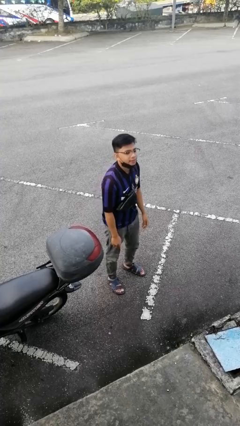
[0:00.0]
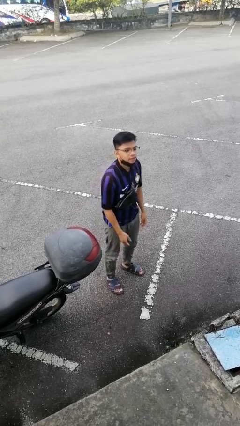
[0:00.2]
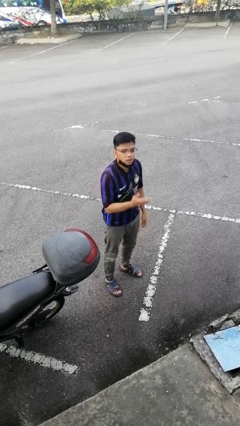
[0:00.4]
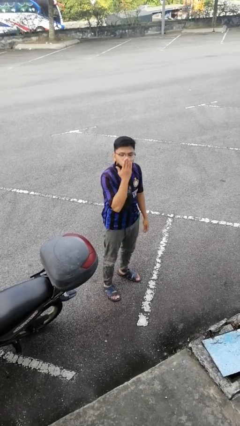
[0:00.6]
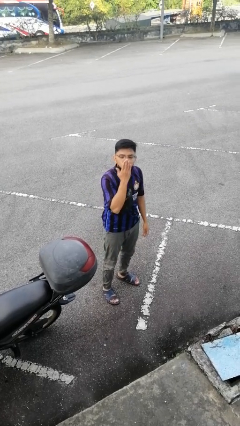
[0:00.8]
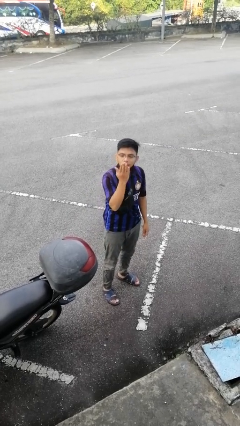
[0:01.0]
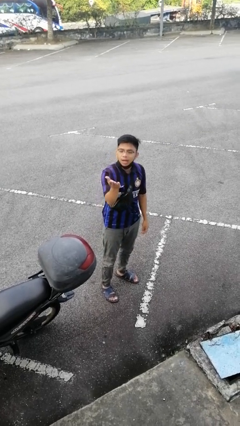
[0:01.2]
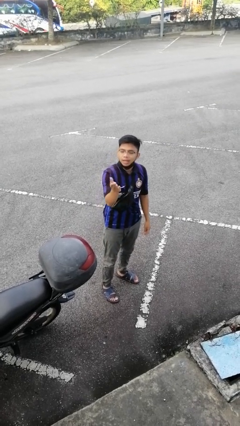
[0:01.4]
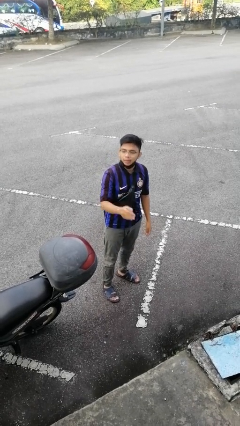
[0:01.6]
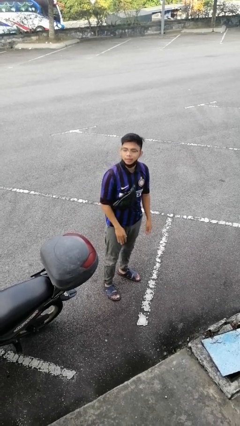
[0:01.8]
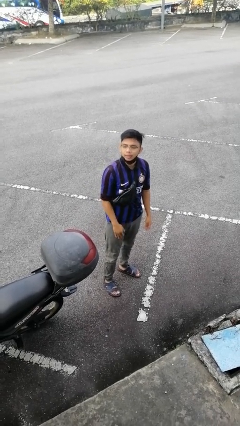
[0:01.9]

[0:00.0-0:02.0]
person gestures blow kiss

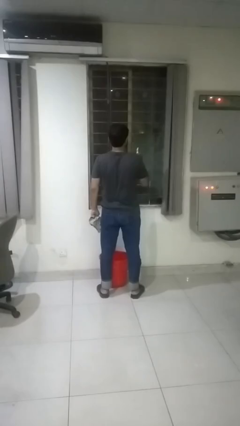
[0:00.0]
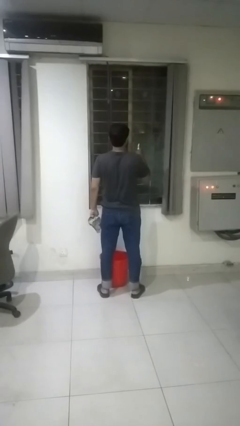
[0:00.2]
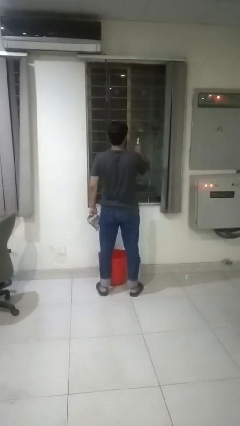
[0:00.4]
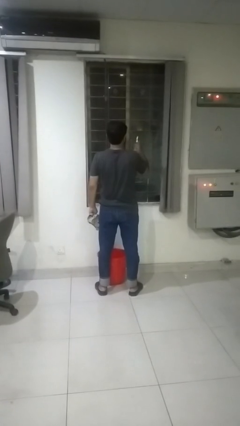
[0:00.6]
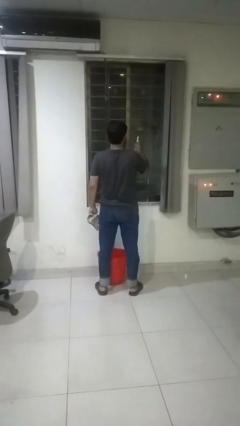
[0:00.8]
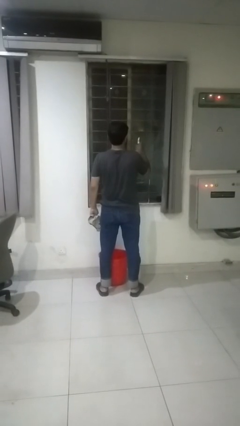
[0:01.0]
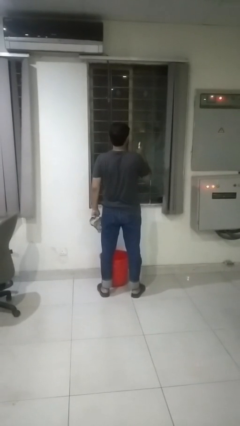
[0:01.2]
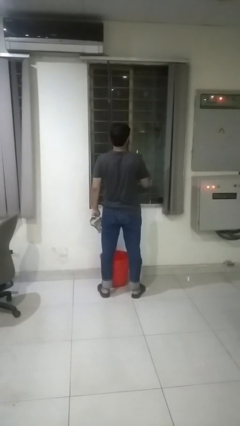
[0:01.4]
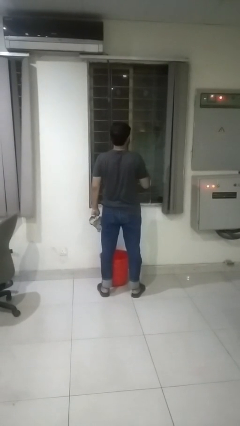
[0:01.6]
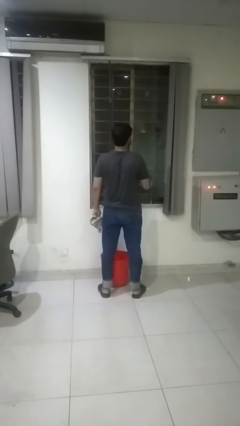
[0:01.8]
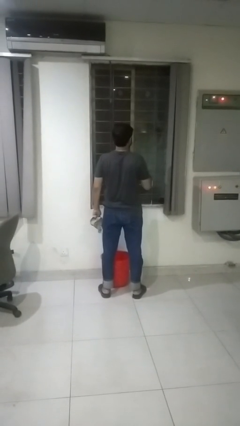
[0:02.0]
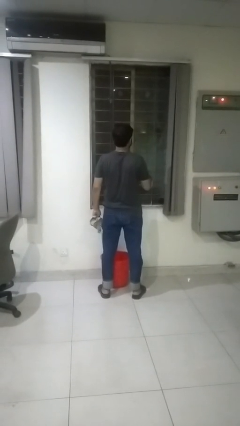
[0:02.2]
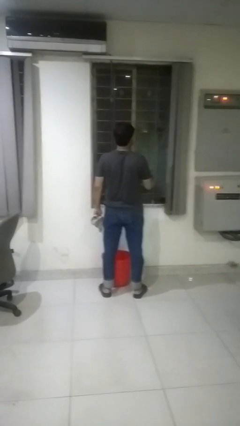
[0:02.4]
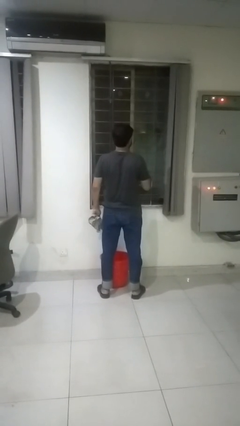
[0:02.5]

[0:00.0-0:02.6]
person sprays from bottle

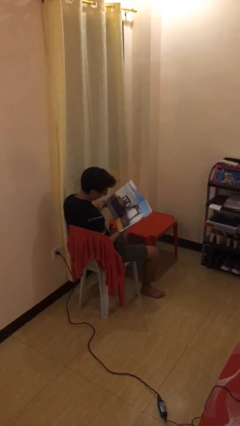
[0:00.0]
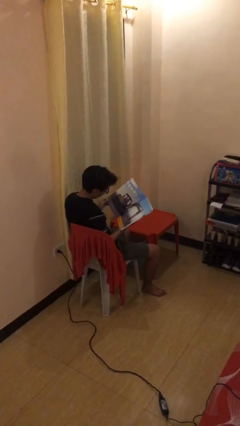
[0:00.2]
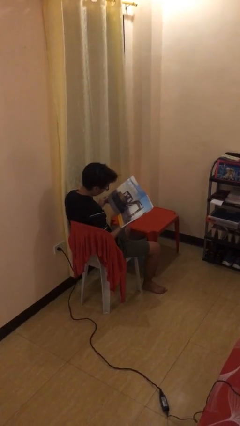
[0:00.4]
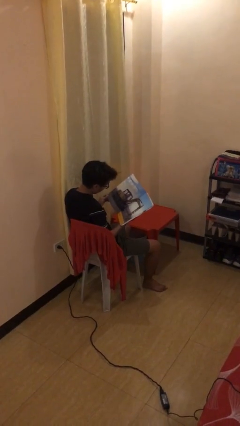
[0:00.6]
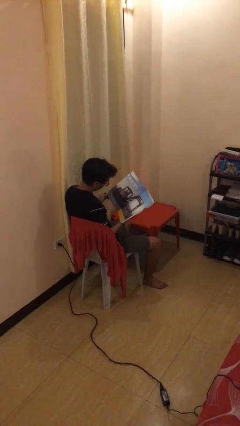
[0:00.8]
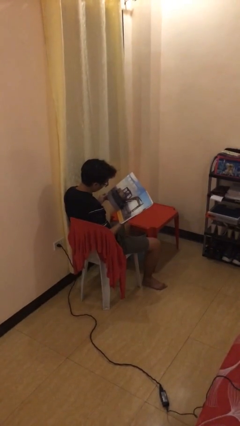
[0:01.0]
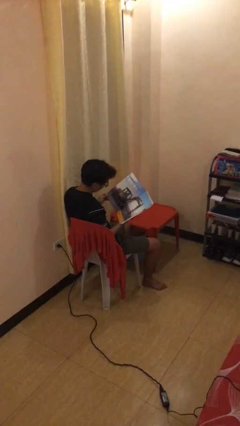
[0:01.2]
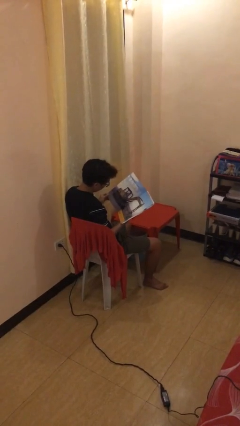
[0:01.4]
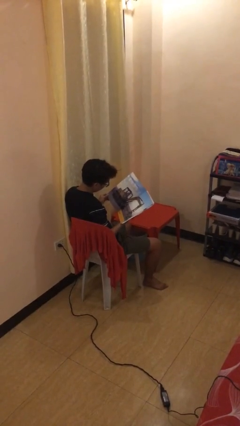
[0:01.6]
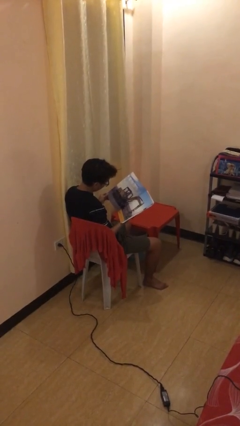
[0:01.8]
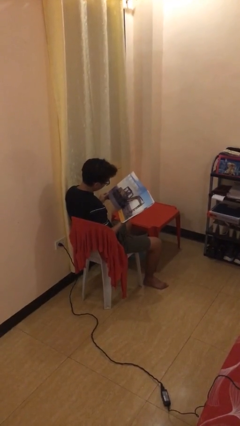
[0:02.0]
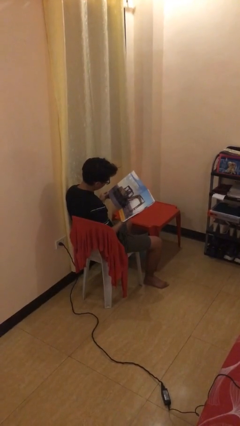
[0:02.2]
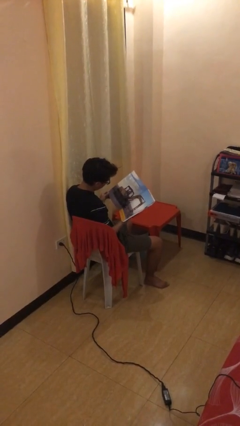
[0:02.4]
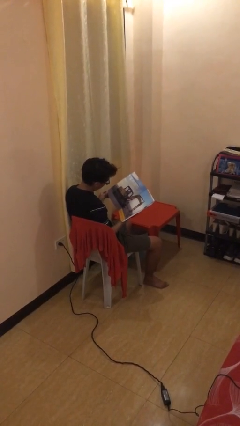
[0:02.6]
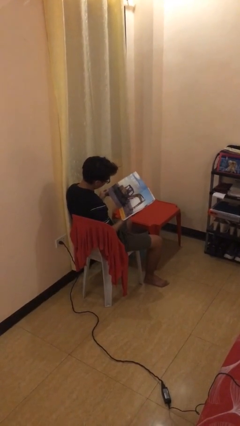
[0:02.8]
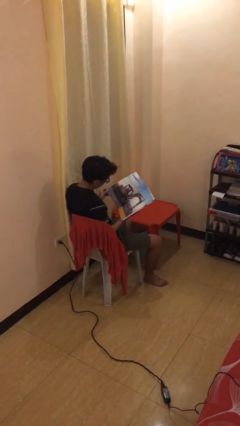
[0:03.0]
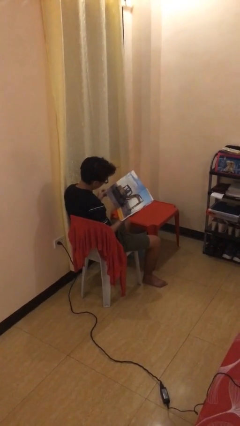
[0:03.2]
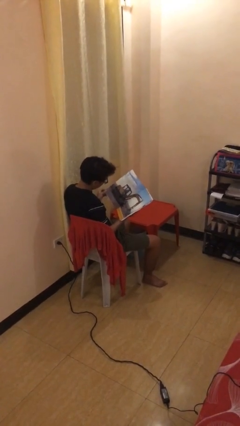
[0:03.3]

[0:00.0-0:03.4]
person reads document

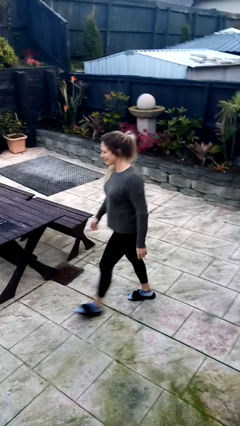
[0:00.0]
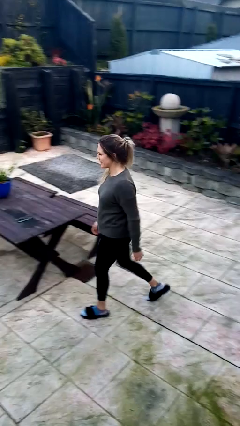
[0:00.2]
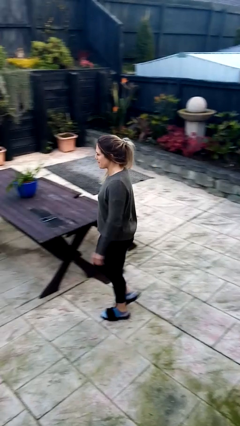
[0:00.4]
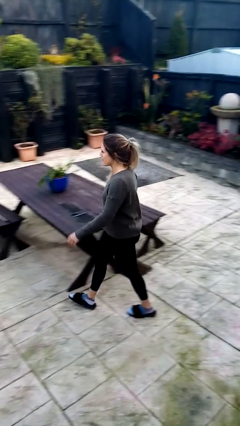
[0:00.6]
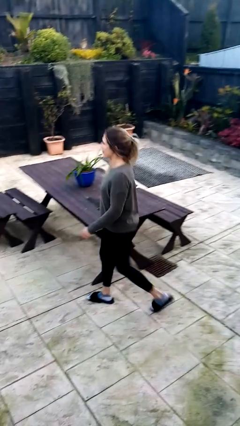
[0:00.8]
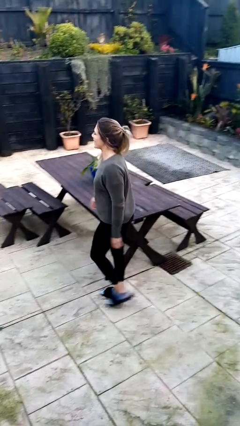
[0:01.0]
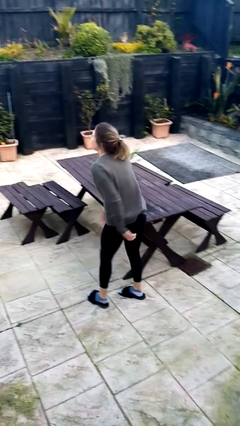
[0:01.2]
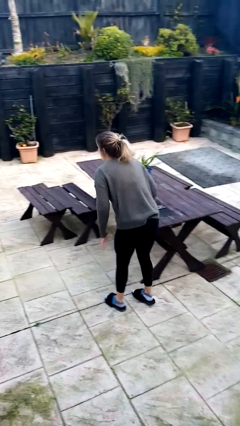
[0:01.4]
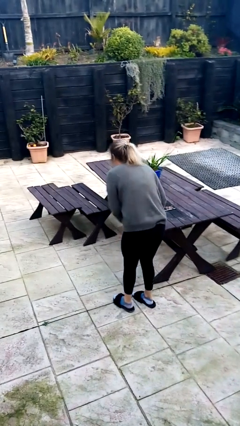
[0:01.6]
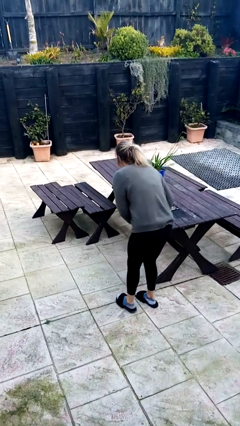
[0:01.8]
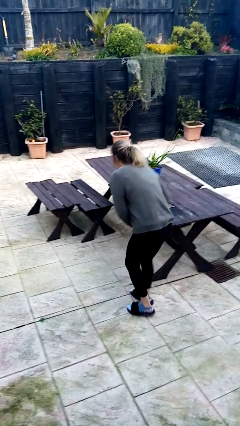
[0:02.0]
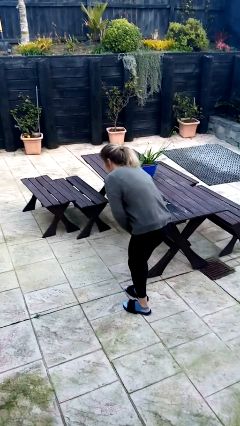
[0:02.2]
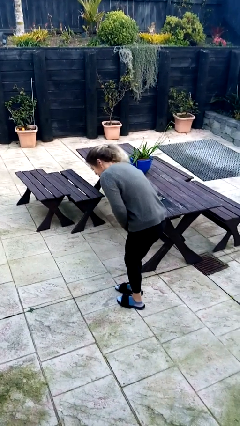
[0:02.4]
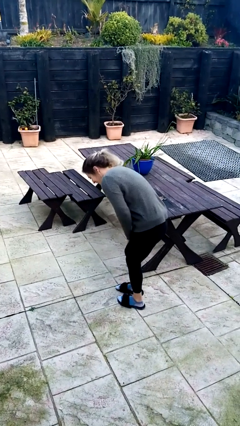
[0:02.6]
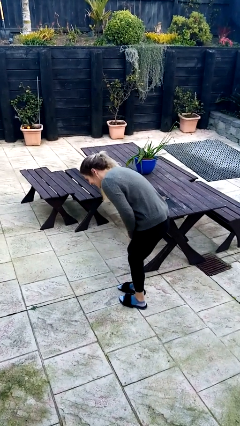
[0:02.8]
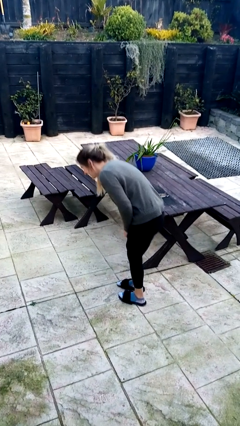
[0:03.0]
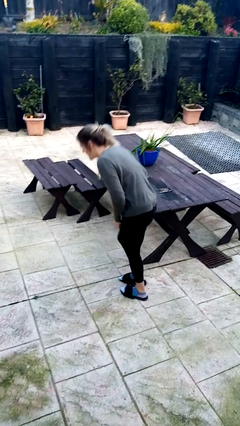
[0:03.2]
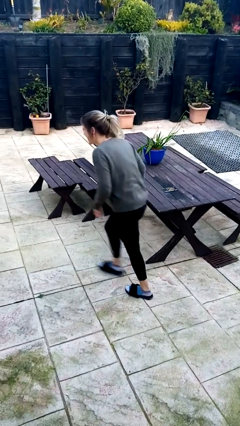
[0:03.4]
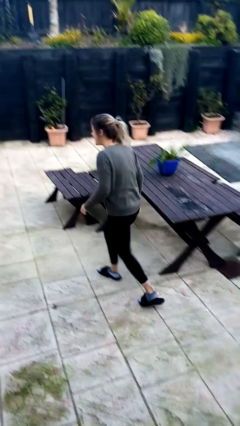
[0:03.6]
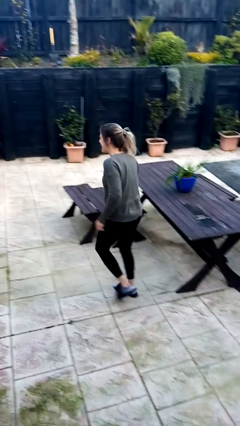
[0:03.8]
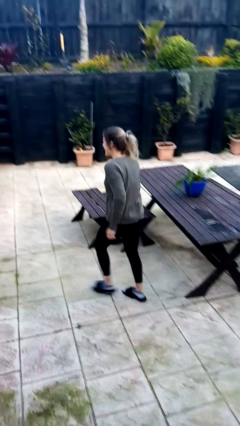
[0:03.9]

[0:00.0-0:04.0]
person bumps into table

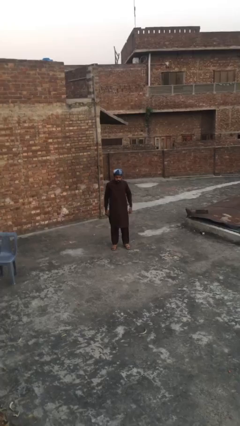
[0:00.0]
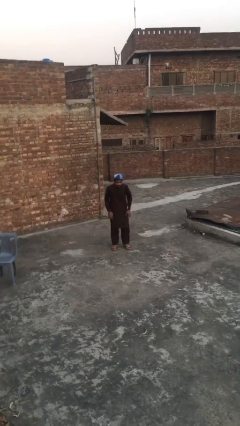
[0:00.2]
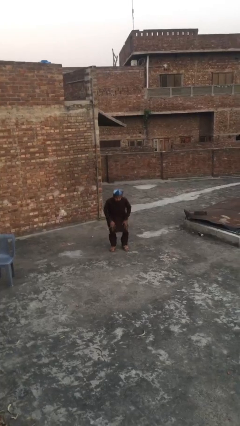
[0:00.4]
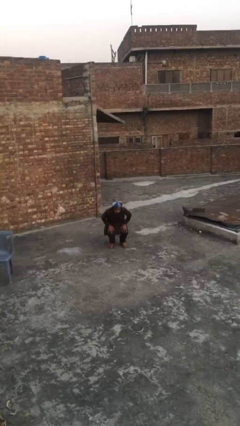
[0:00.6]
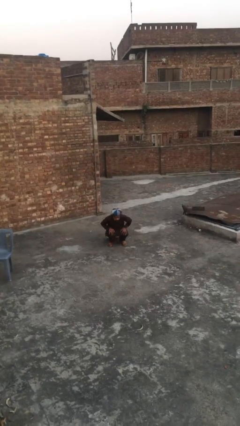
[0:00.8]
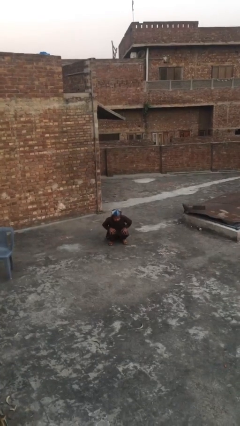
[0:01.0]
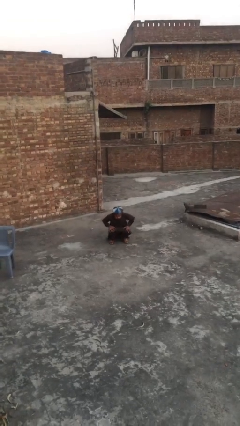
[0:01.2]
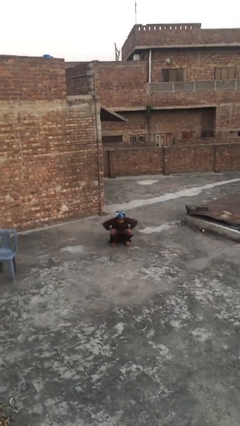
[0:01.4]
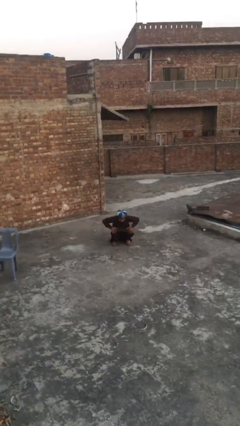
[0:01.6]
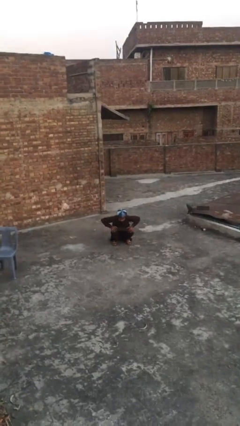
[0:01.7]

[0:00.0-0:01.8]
person sits down

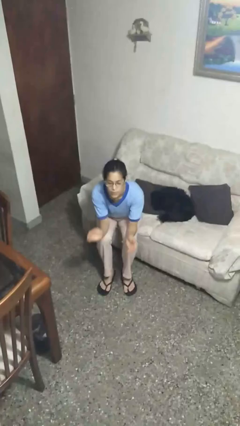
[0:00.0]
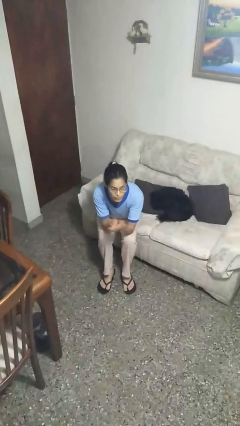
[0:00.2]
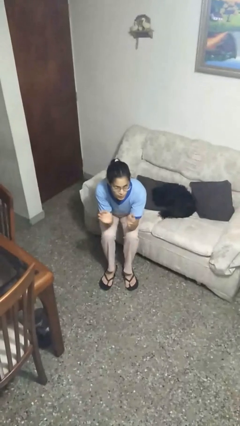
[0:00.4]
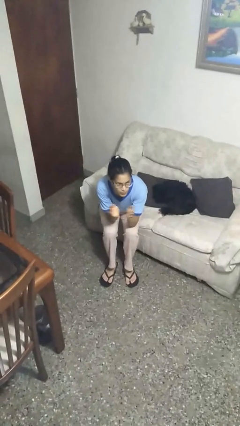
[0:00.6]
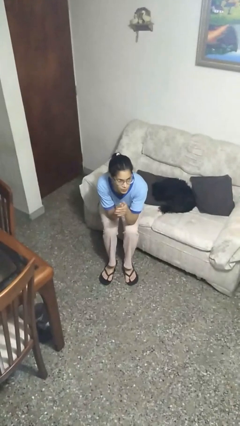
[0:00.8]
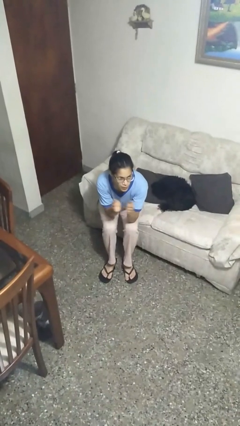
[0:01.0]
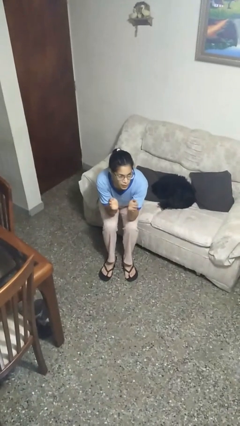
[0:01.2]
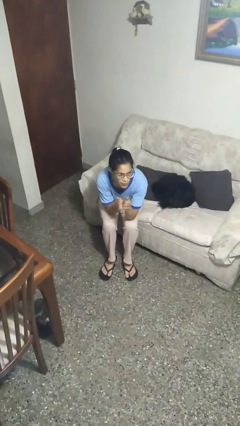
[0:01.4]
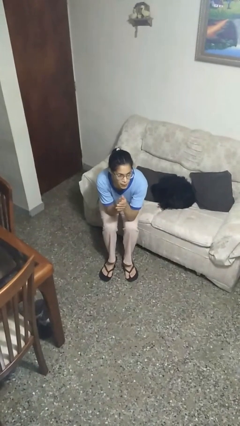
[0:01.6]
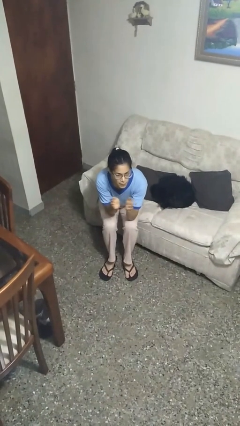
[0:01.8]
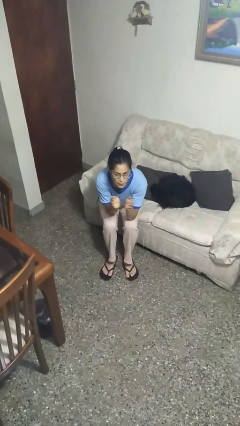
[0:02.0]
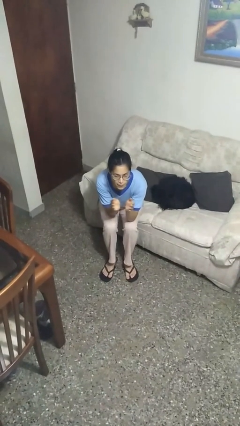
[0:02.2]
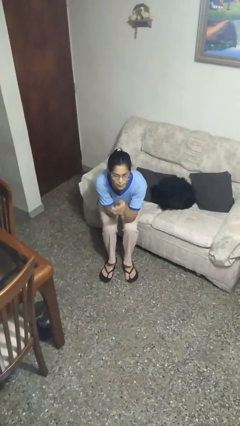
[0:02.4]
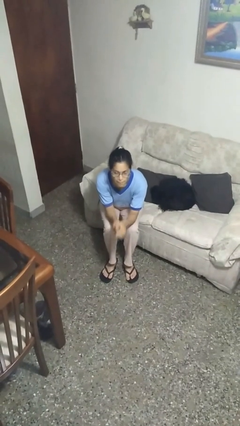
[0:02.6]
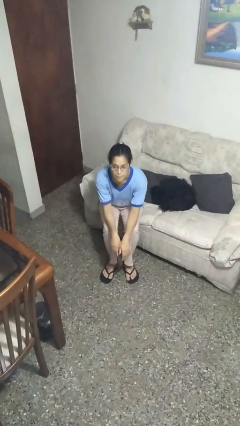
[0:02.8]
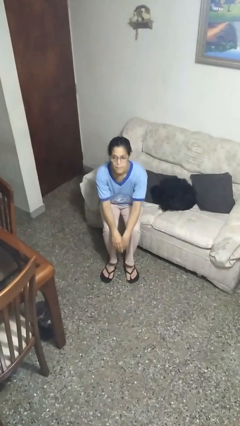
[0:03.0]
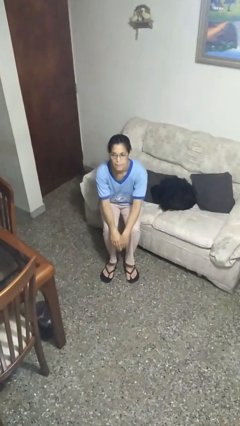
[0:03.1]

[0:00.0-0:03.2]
person claps hands

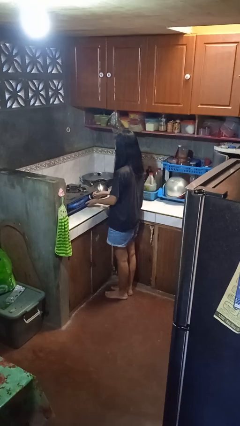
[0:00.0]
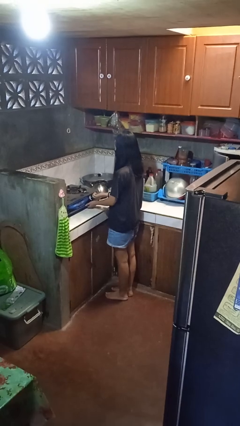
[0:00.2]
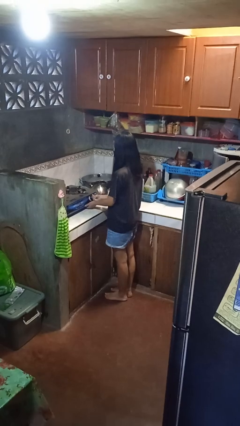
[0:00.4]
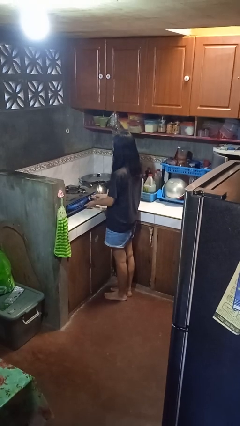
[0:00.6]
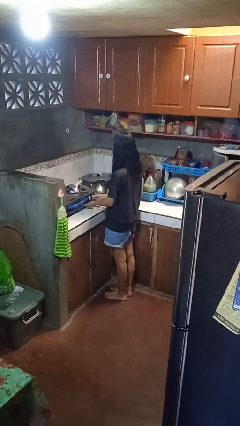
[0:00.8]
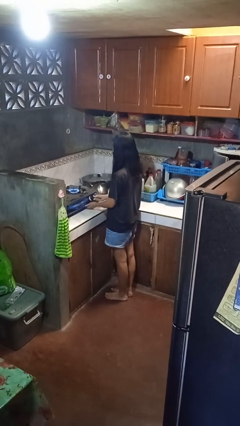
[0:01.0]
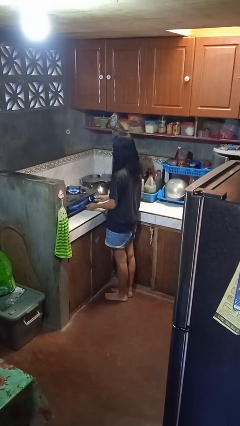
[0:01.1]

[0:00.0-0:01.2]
person turns on stovetop
